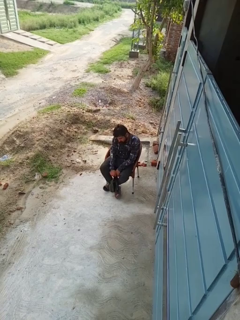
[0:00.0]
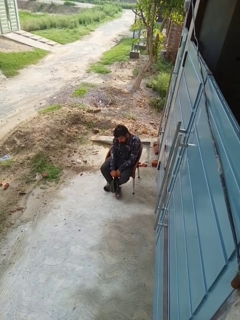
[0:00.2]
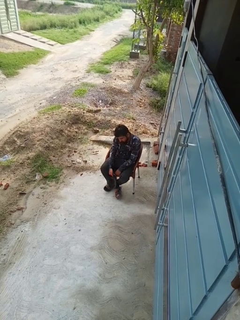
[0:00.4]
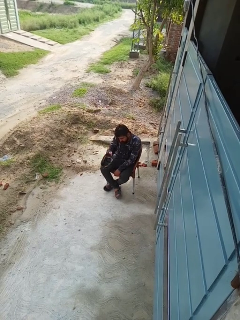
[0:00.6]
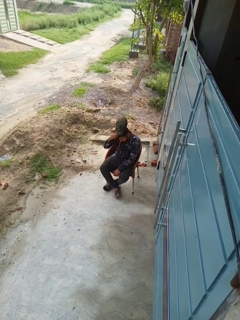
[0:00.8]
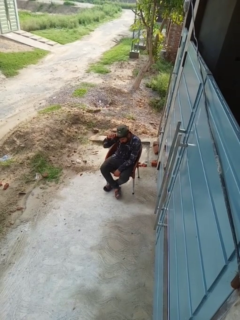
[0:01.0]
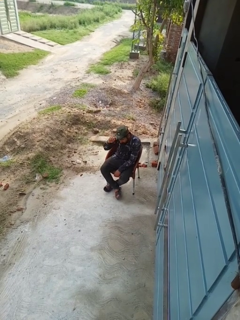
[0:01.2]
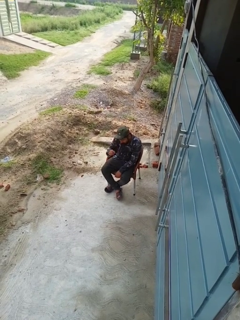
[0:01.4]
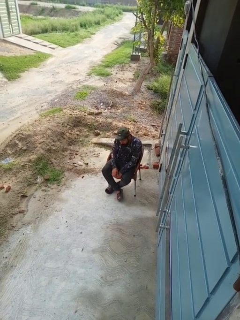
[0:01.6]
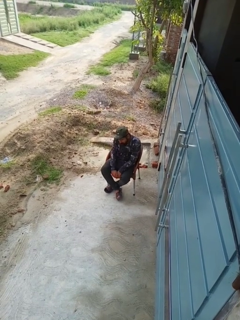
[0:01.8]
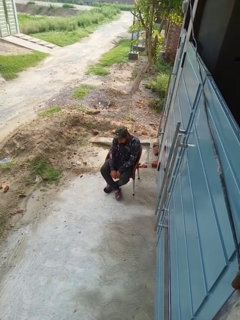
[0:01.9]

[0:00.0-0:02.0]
person puts on hat

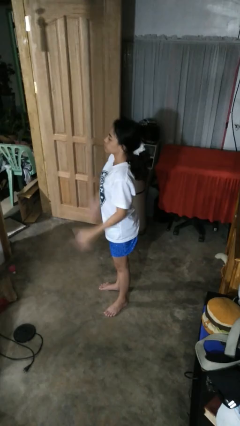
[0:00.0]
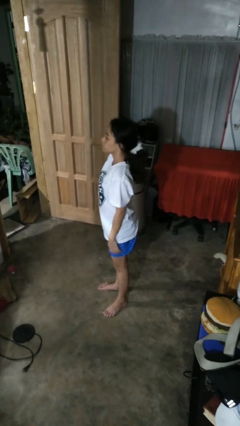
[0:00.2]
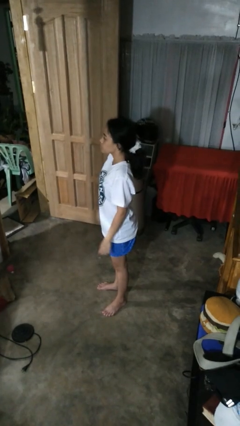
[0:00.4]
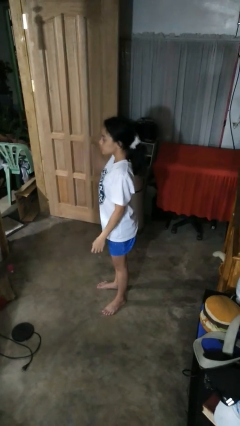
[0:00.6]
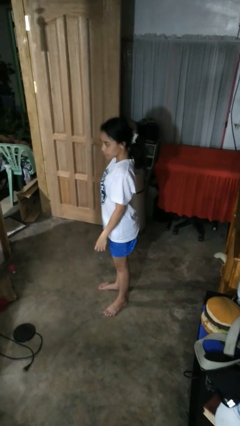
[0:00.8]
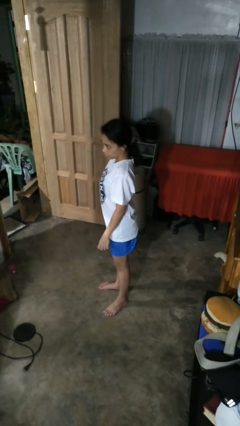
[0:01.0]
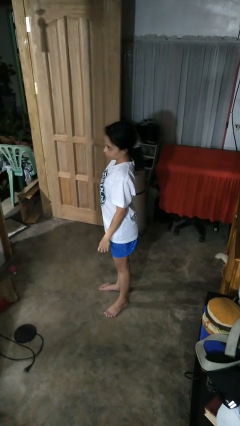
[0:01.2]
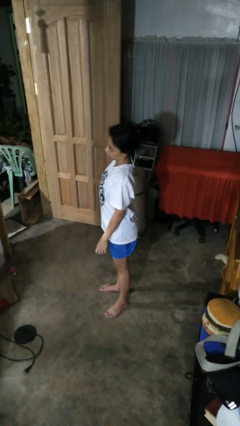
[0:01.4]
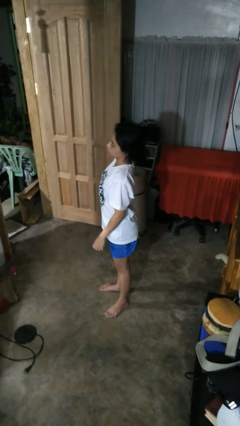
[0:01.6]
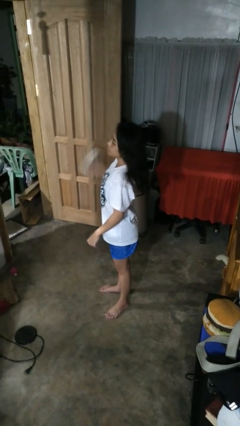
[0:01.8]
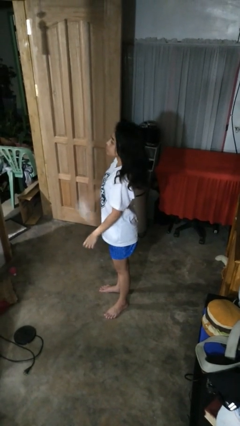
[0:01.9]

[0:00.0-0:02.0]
person takes off hairtie

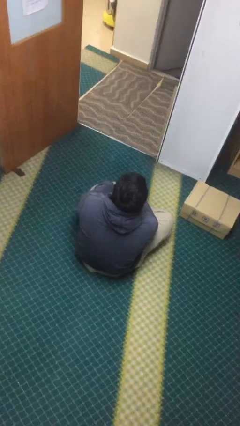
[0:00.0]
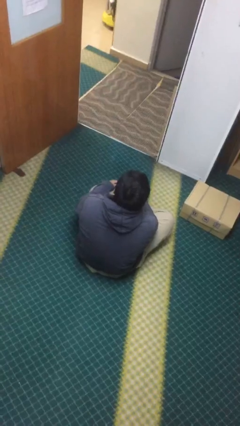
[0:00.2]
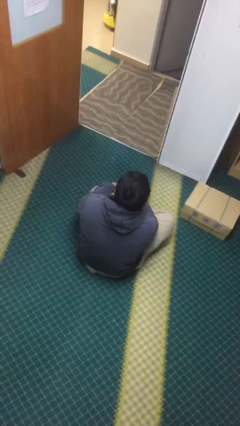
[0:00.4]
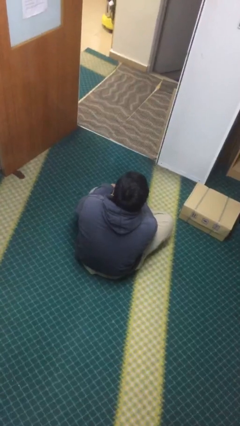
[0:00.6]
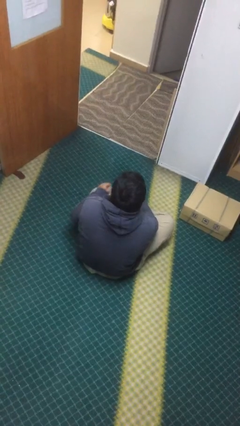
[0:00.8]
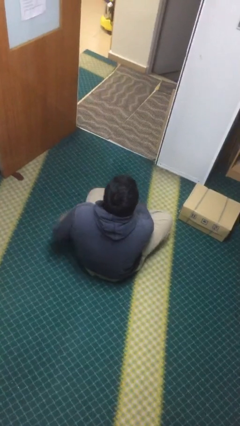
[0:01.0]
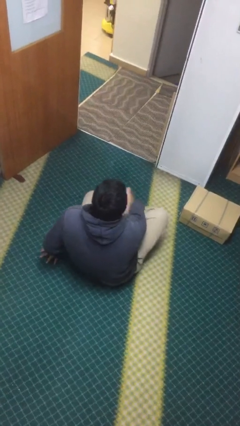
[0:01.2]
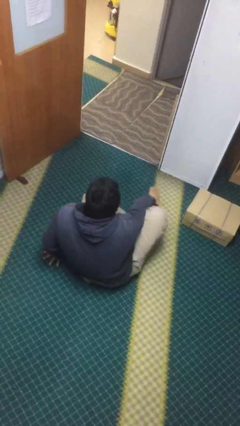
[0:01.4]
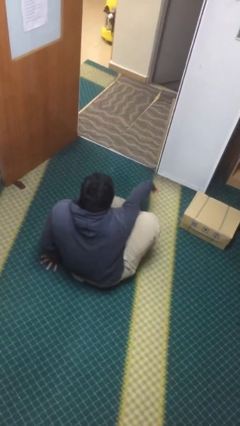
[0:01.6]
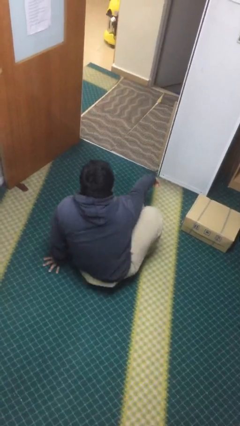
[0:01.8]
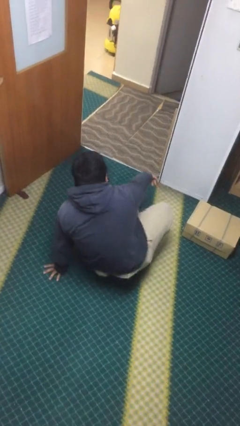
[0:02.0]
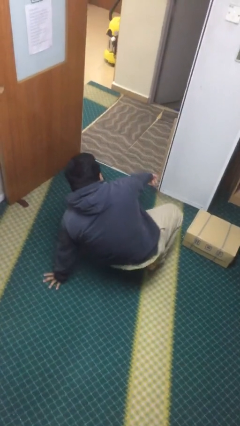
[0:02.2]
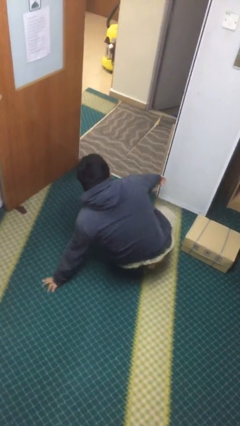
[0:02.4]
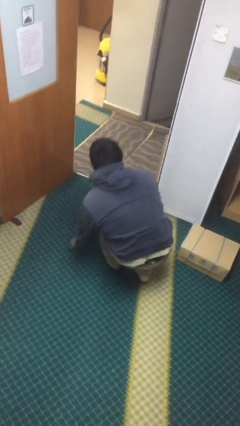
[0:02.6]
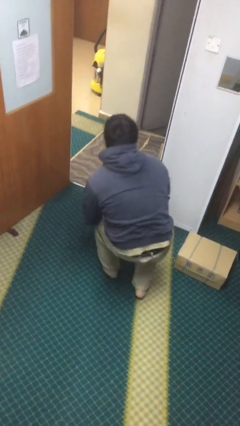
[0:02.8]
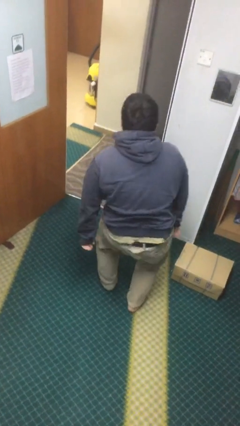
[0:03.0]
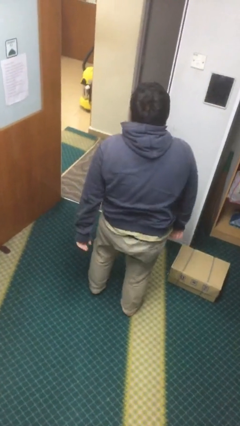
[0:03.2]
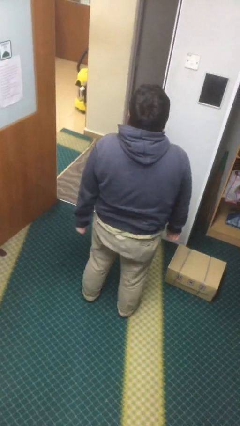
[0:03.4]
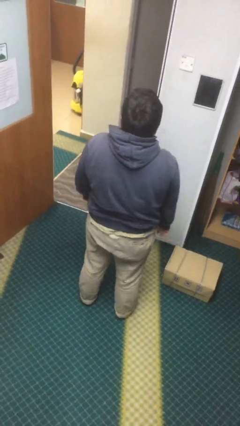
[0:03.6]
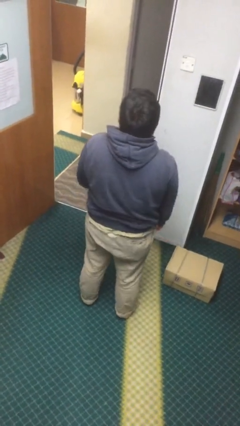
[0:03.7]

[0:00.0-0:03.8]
person stands up from floor

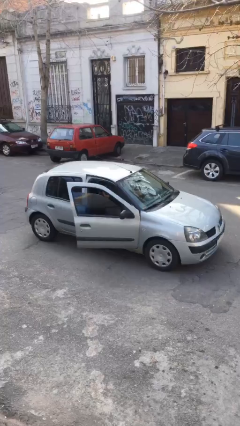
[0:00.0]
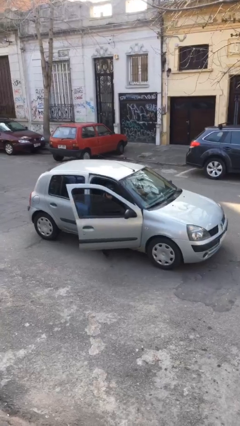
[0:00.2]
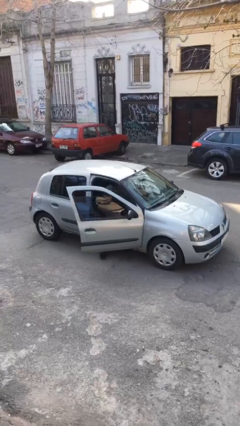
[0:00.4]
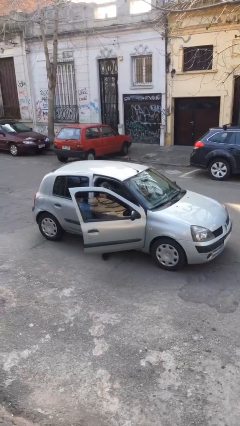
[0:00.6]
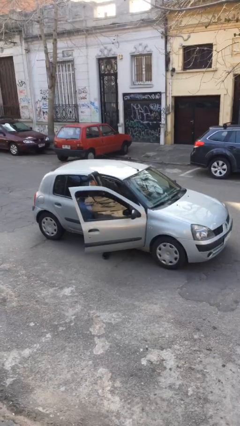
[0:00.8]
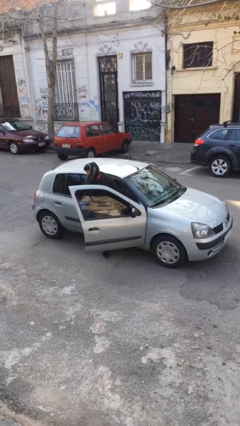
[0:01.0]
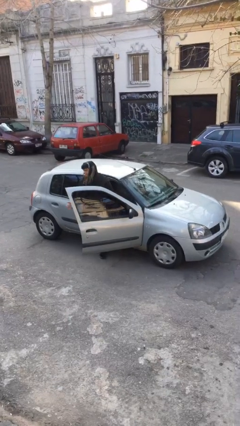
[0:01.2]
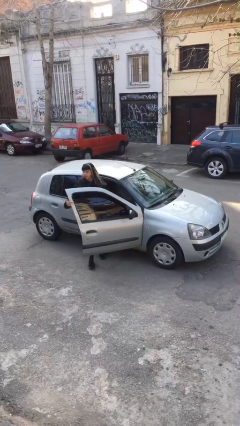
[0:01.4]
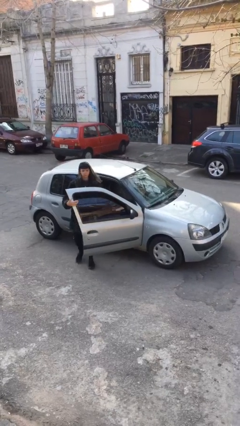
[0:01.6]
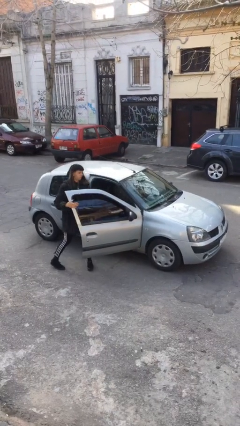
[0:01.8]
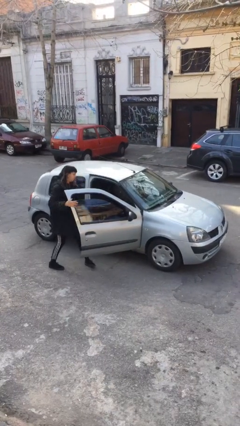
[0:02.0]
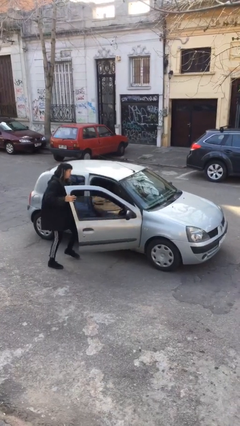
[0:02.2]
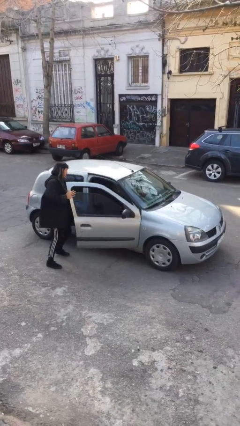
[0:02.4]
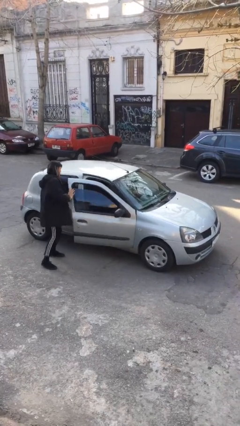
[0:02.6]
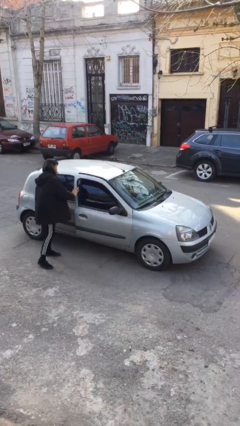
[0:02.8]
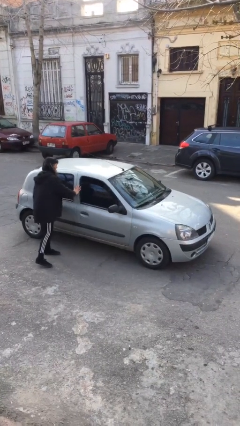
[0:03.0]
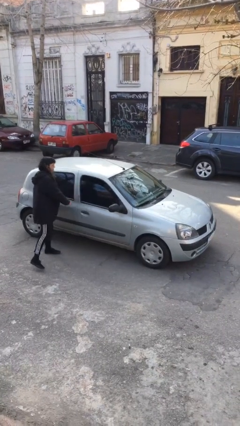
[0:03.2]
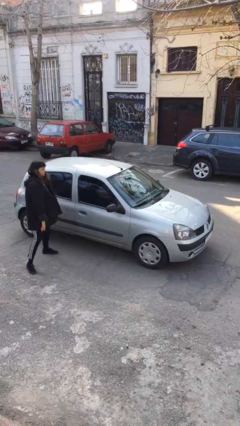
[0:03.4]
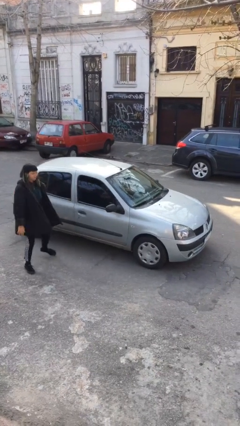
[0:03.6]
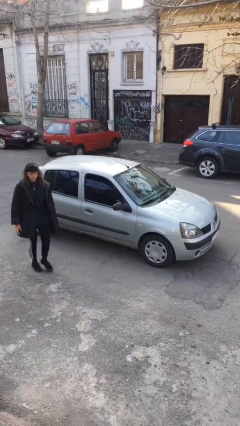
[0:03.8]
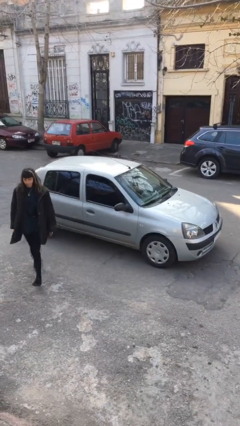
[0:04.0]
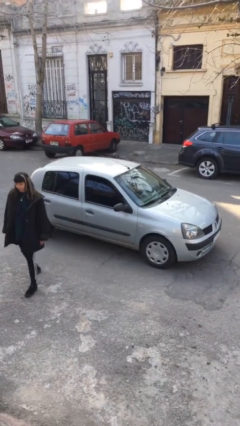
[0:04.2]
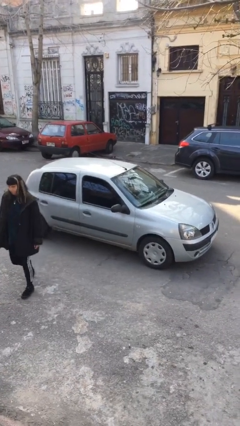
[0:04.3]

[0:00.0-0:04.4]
car drops off person

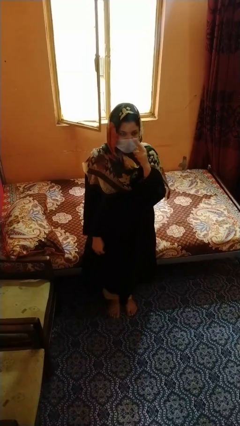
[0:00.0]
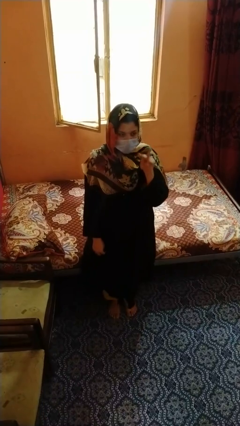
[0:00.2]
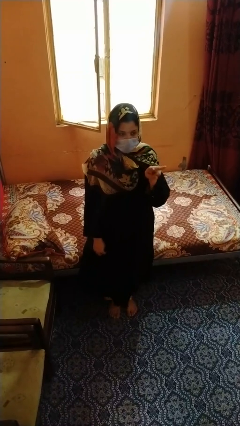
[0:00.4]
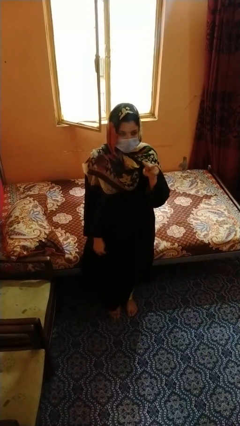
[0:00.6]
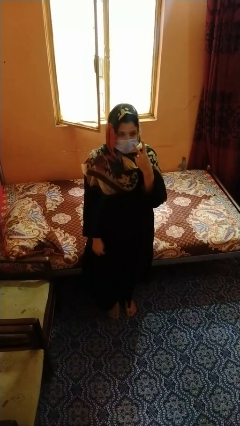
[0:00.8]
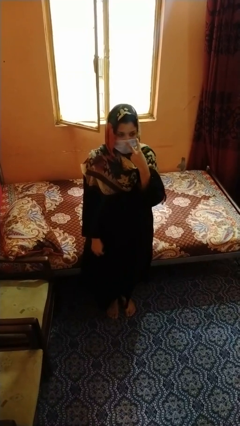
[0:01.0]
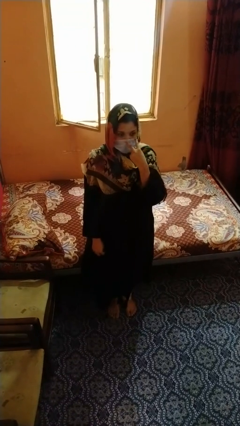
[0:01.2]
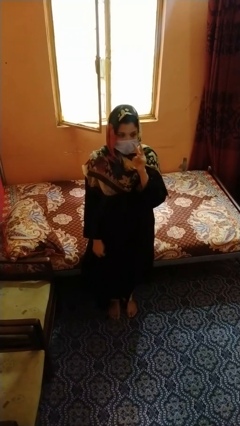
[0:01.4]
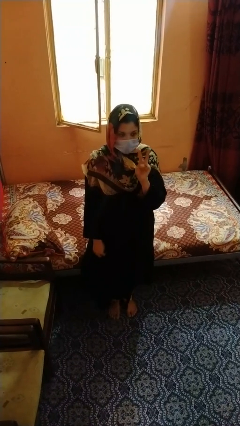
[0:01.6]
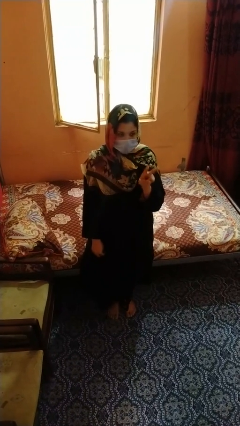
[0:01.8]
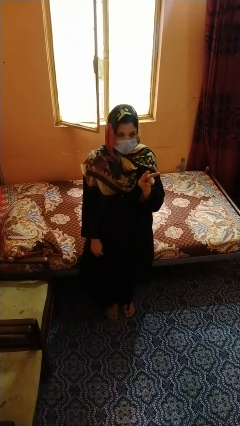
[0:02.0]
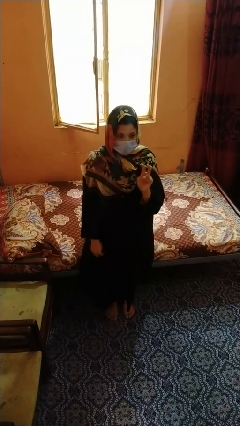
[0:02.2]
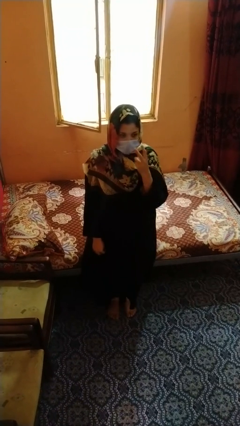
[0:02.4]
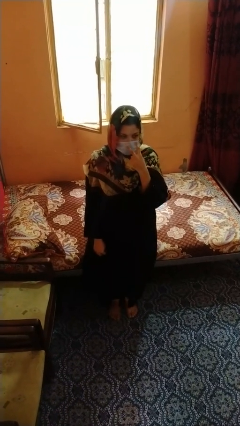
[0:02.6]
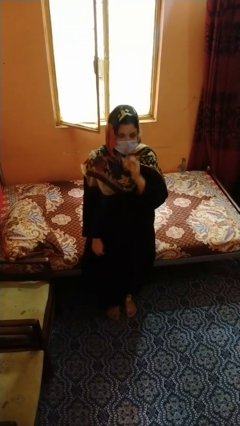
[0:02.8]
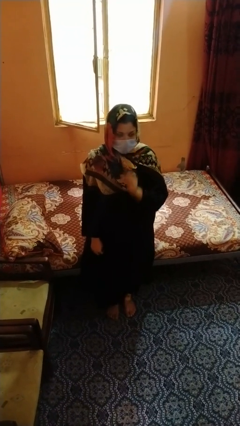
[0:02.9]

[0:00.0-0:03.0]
person gestures watch closely

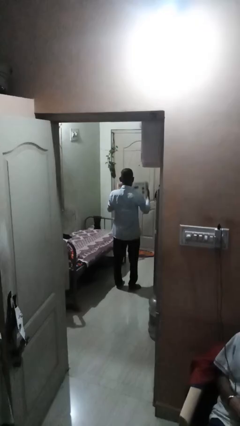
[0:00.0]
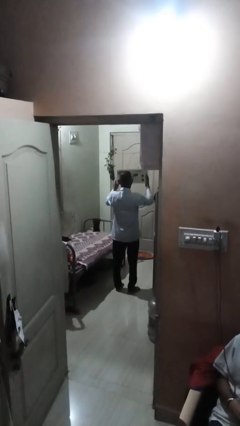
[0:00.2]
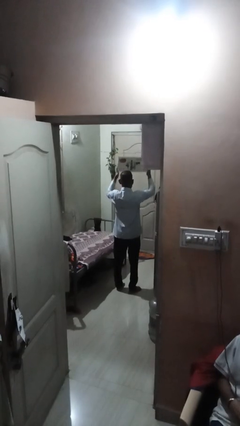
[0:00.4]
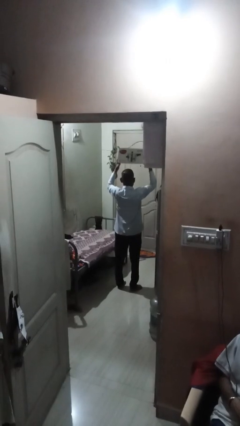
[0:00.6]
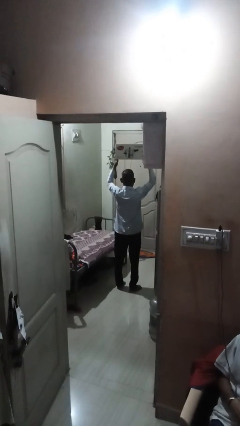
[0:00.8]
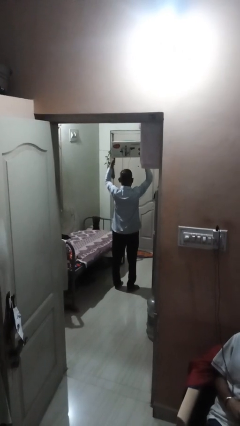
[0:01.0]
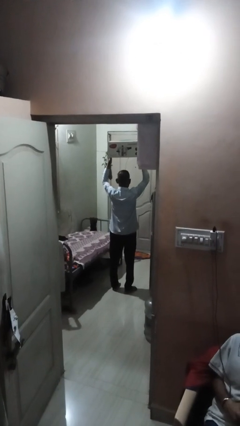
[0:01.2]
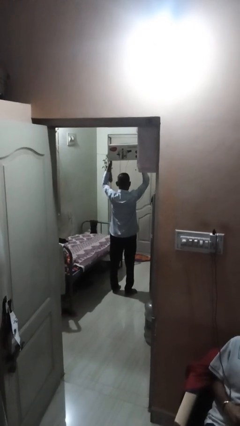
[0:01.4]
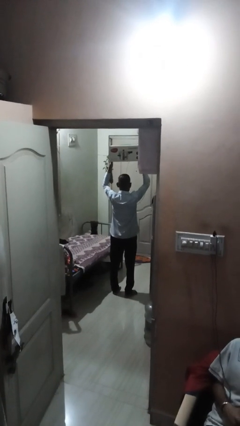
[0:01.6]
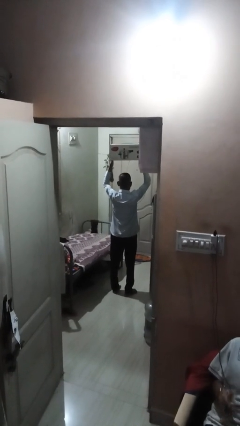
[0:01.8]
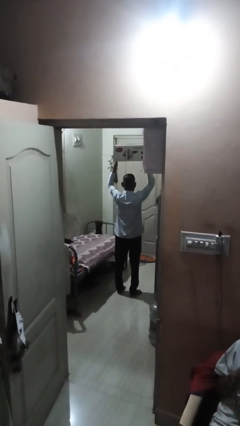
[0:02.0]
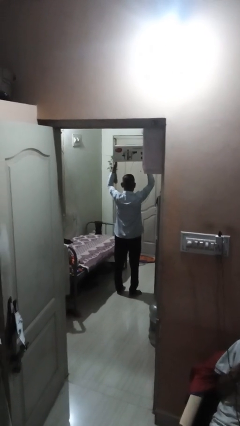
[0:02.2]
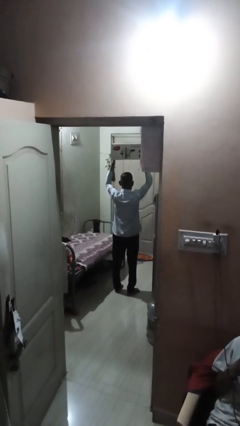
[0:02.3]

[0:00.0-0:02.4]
person holds object above head

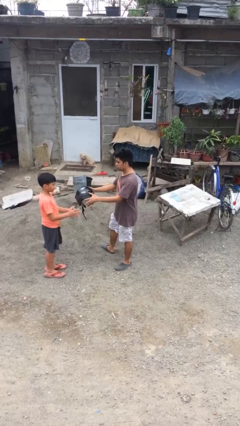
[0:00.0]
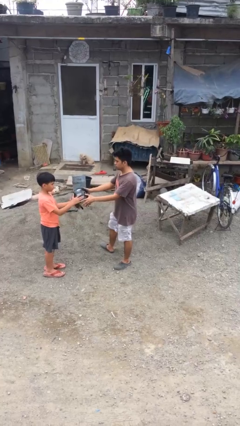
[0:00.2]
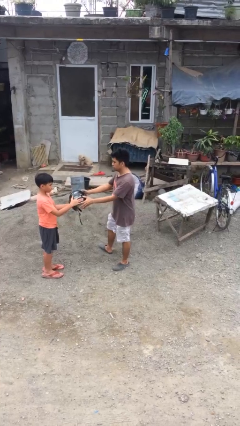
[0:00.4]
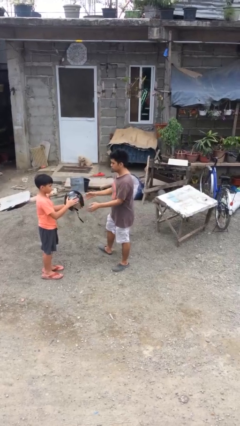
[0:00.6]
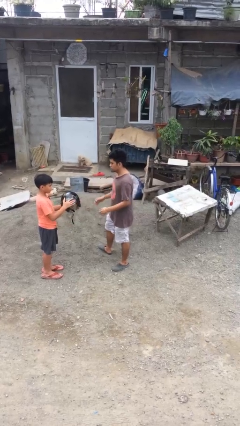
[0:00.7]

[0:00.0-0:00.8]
person transfers object to person
